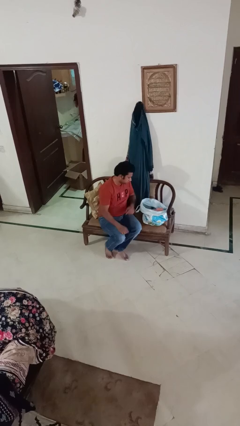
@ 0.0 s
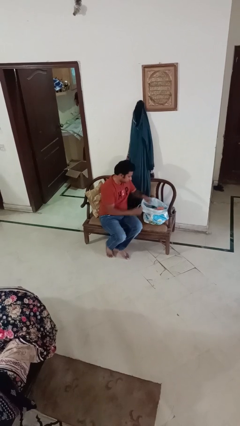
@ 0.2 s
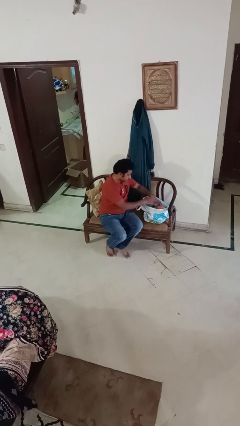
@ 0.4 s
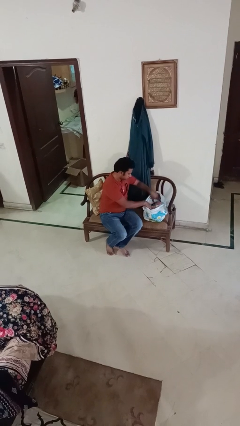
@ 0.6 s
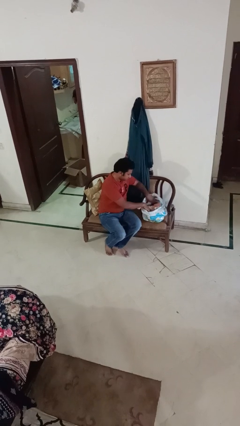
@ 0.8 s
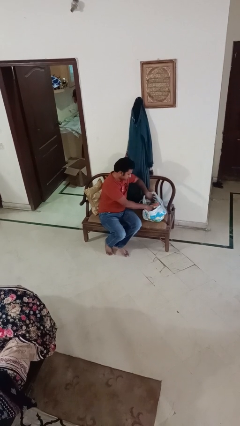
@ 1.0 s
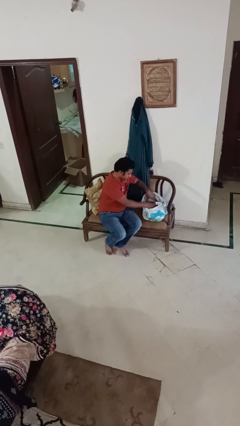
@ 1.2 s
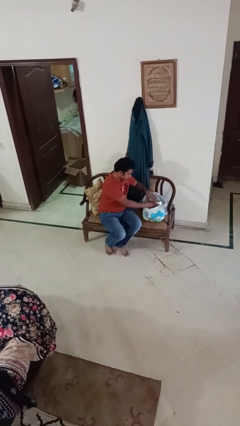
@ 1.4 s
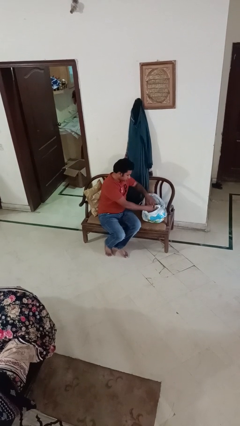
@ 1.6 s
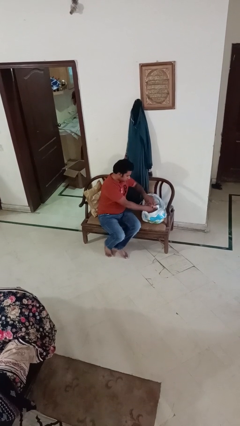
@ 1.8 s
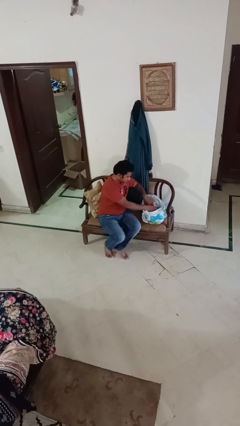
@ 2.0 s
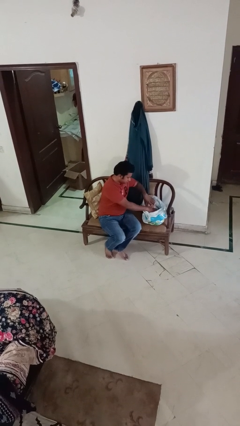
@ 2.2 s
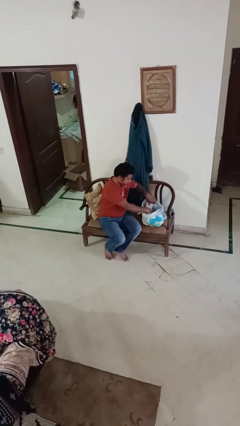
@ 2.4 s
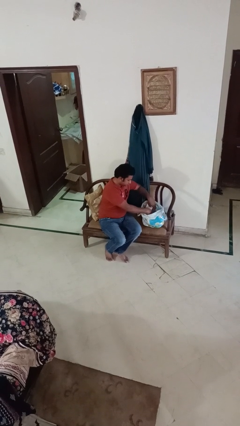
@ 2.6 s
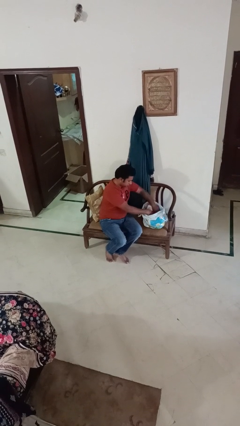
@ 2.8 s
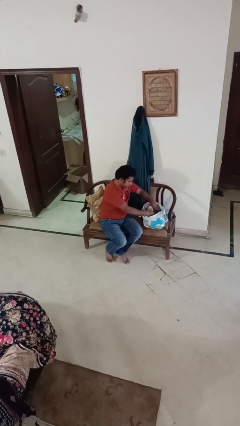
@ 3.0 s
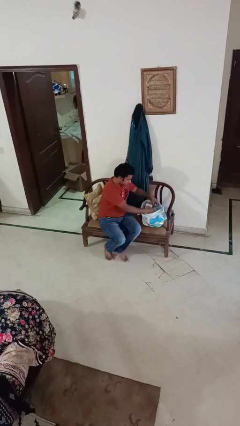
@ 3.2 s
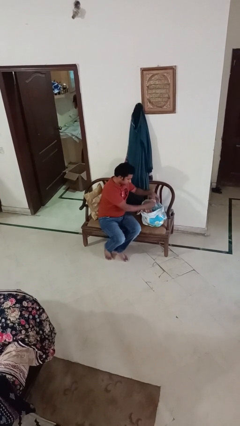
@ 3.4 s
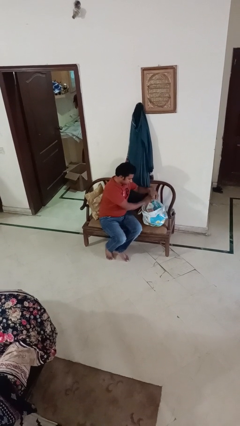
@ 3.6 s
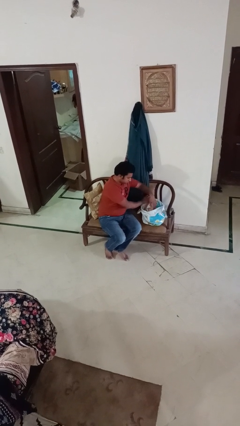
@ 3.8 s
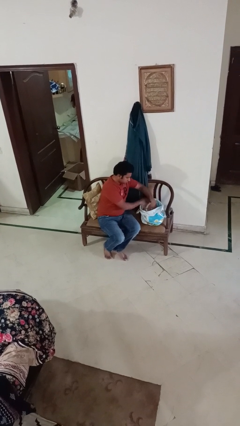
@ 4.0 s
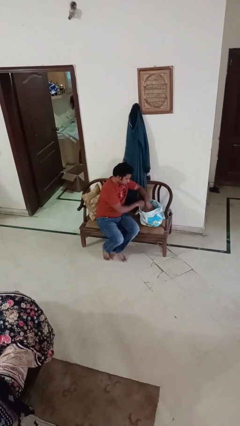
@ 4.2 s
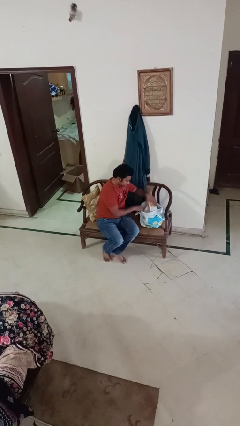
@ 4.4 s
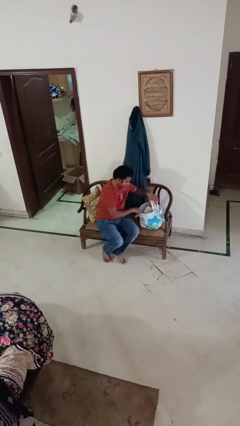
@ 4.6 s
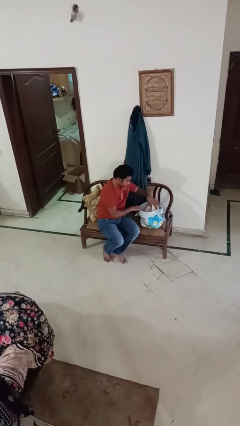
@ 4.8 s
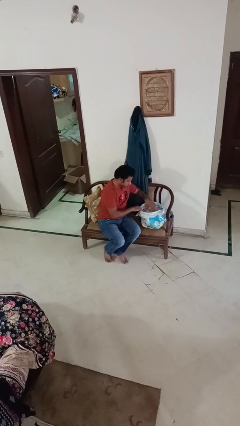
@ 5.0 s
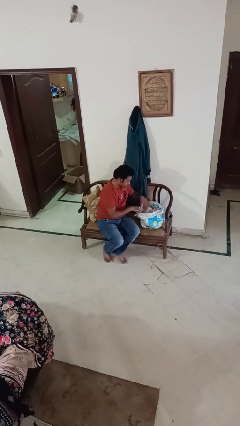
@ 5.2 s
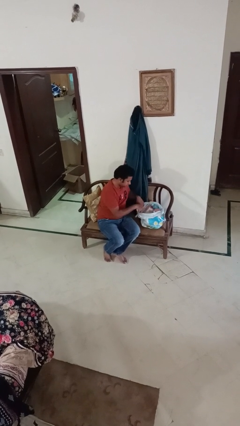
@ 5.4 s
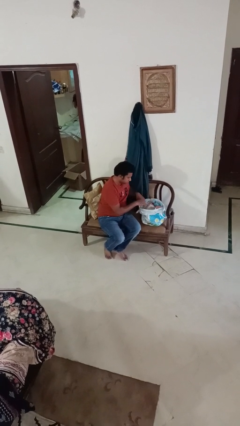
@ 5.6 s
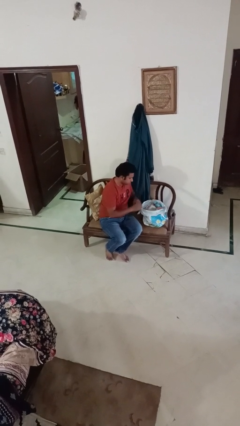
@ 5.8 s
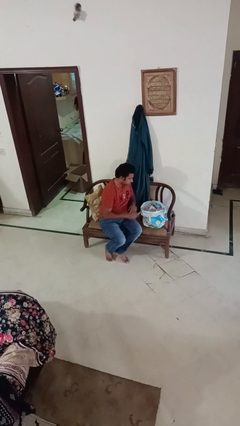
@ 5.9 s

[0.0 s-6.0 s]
person searches in bag

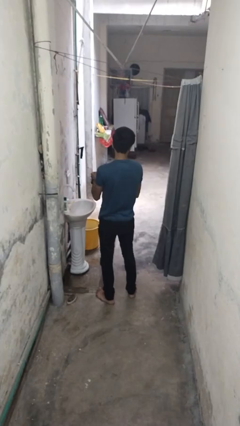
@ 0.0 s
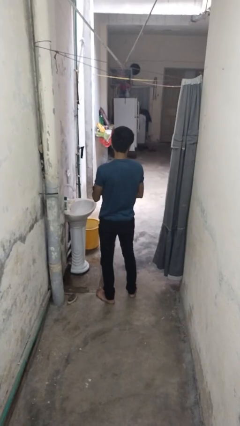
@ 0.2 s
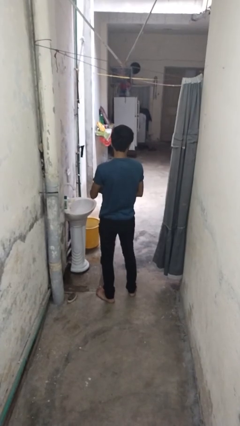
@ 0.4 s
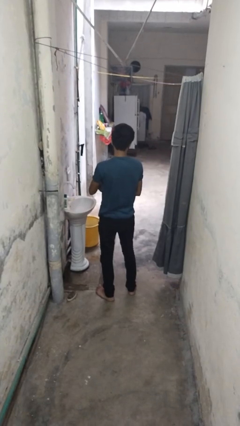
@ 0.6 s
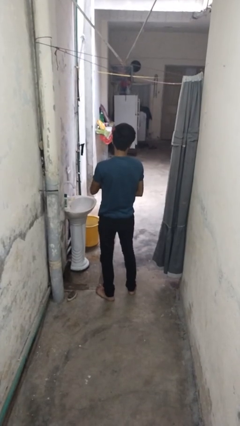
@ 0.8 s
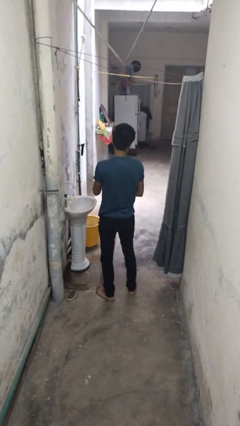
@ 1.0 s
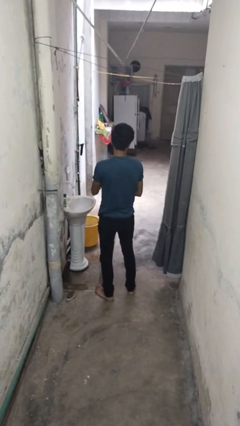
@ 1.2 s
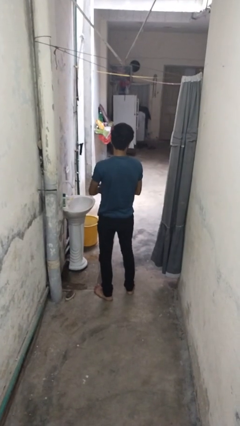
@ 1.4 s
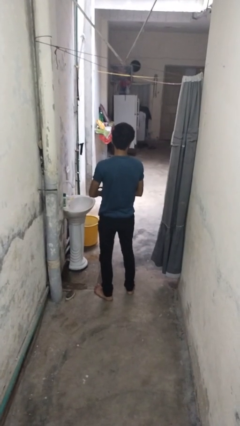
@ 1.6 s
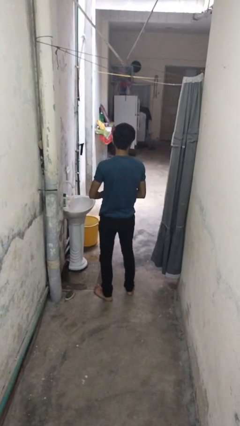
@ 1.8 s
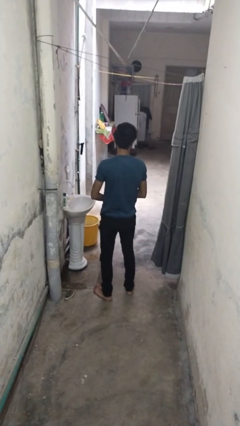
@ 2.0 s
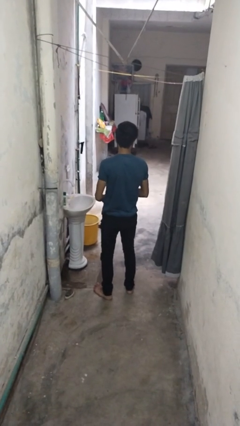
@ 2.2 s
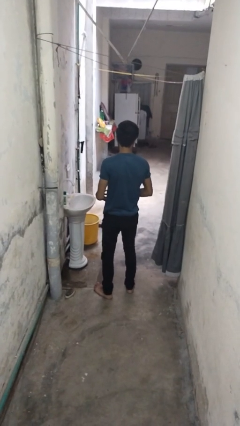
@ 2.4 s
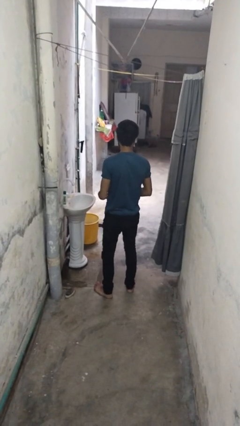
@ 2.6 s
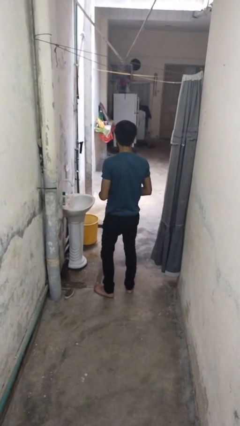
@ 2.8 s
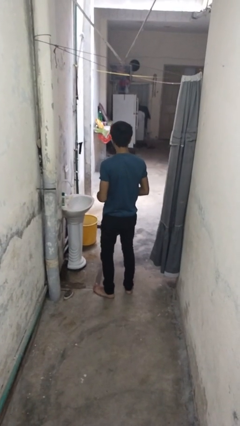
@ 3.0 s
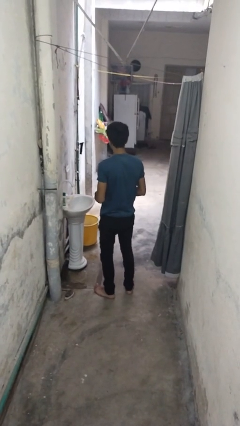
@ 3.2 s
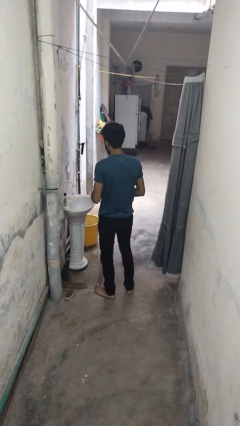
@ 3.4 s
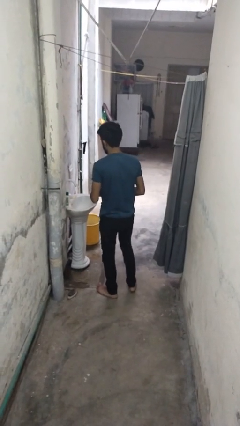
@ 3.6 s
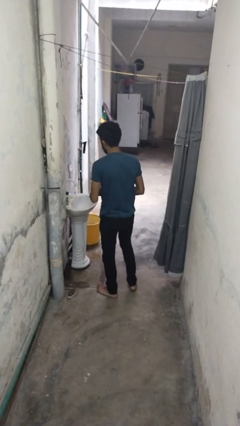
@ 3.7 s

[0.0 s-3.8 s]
person takes off wristwatch

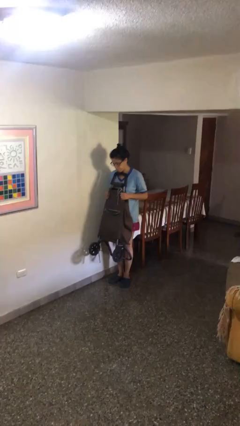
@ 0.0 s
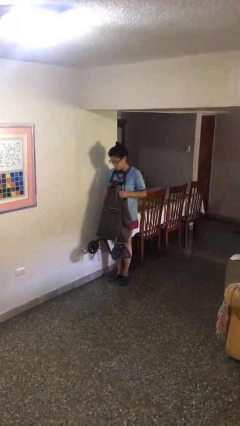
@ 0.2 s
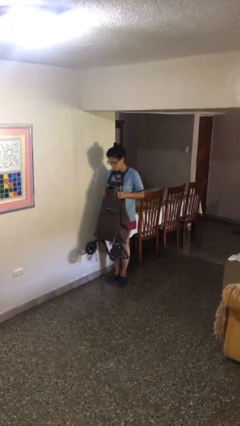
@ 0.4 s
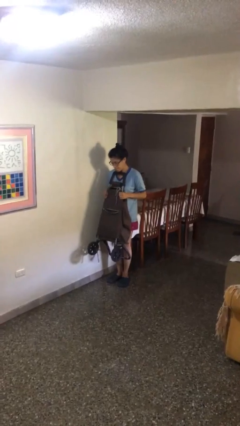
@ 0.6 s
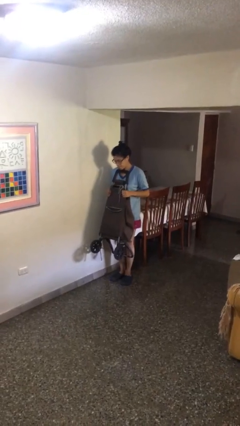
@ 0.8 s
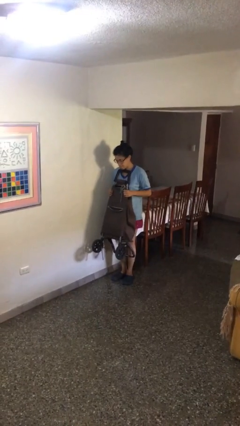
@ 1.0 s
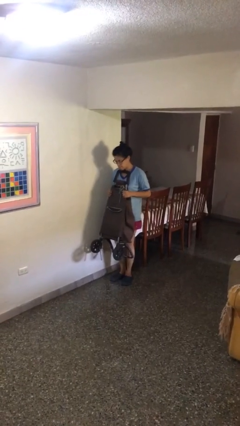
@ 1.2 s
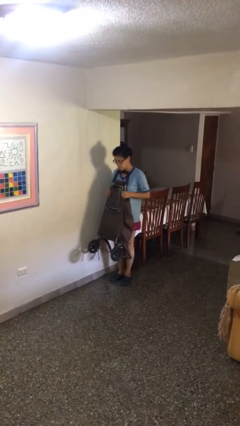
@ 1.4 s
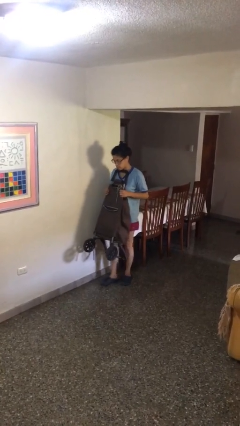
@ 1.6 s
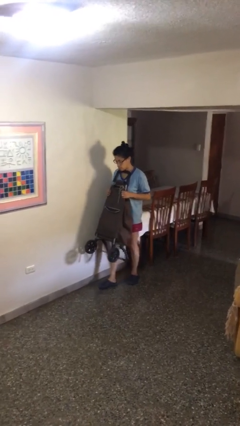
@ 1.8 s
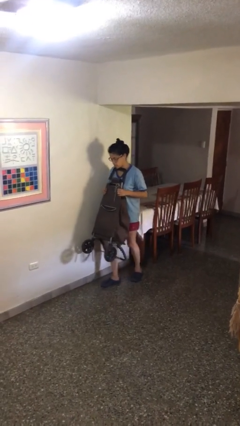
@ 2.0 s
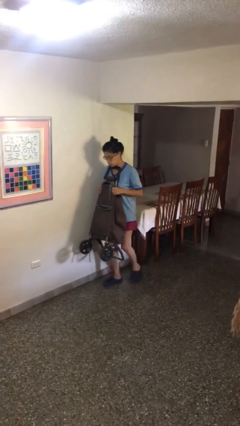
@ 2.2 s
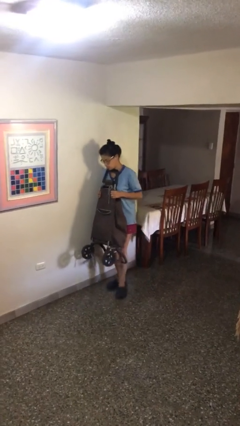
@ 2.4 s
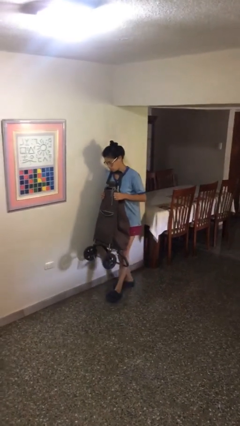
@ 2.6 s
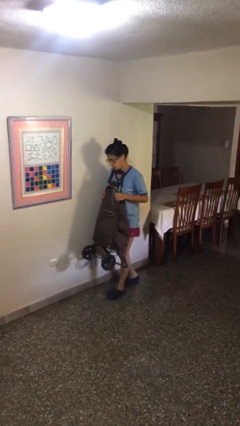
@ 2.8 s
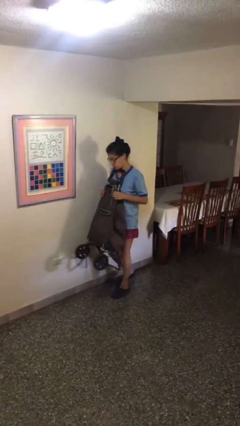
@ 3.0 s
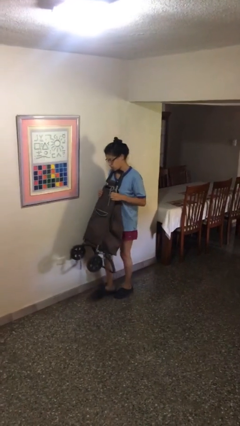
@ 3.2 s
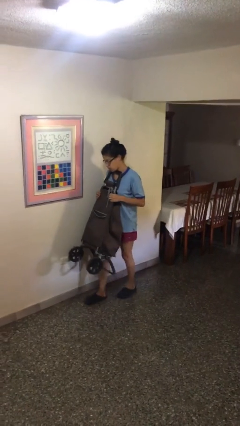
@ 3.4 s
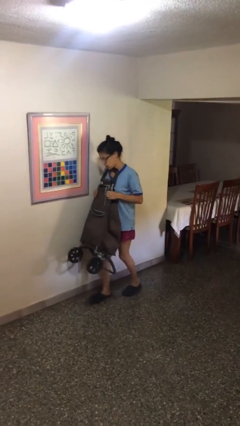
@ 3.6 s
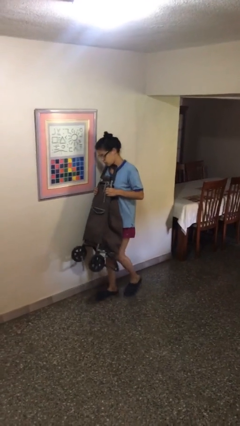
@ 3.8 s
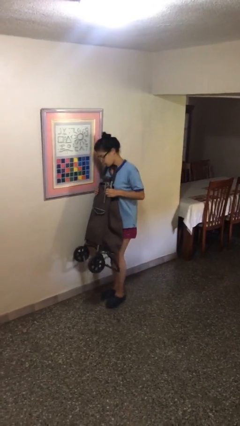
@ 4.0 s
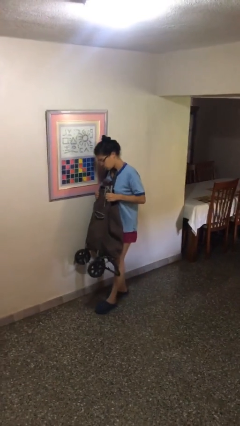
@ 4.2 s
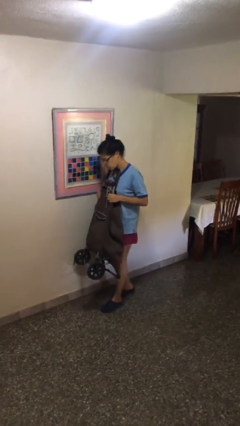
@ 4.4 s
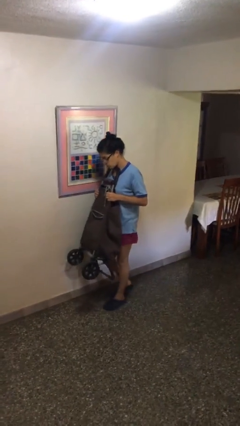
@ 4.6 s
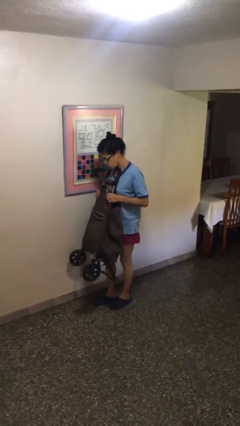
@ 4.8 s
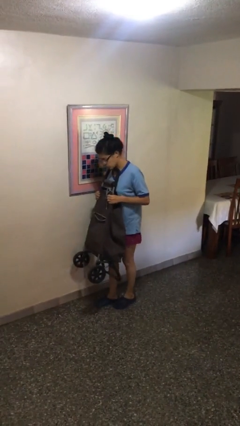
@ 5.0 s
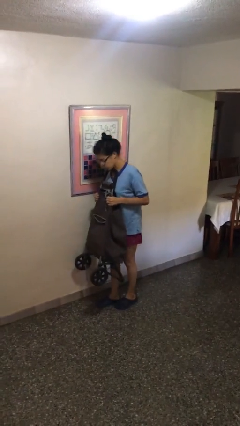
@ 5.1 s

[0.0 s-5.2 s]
person carries heavy object

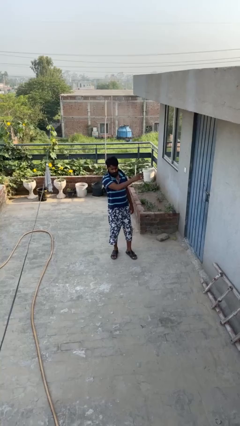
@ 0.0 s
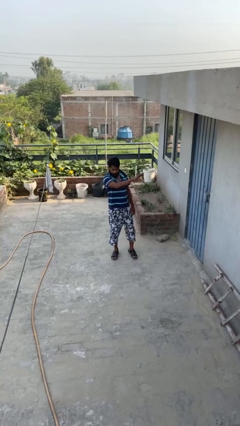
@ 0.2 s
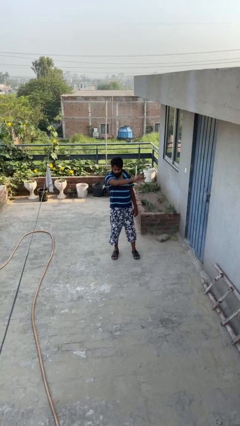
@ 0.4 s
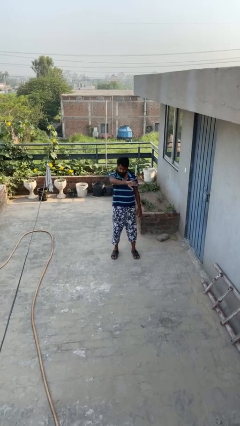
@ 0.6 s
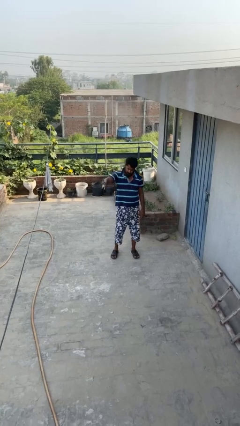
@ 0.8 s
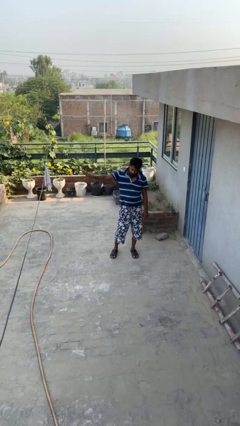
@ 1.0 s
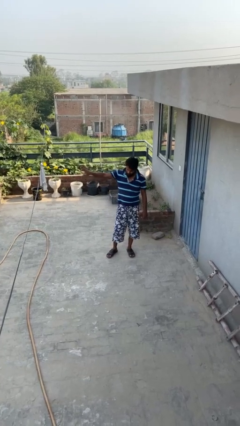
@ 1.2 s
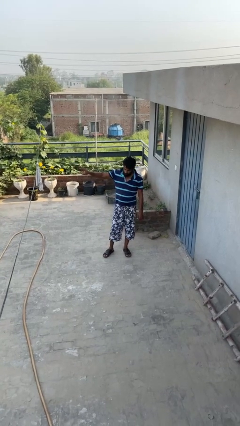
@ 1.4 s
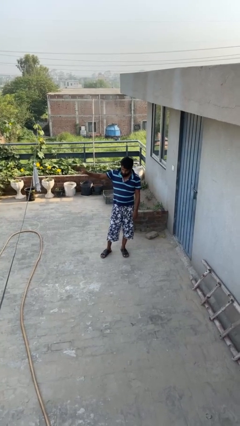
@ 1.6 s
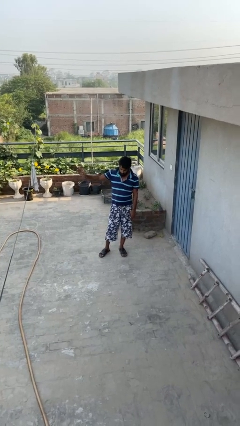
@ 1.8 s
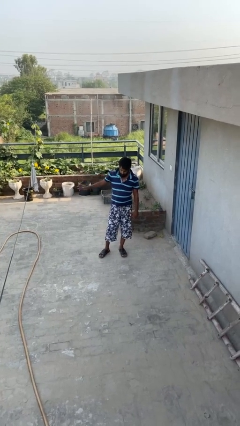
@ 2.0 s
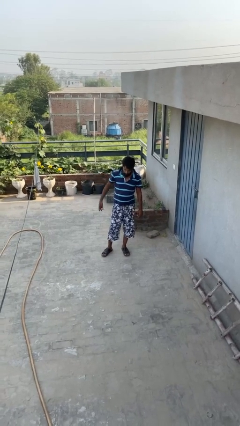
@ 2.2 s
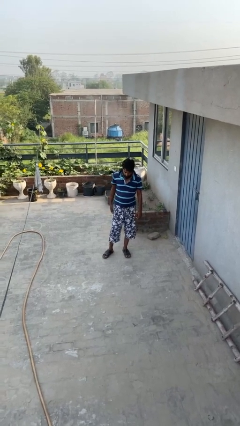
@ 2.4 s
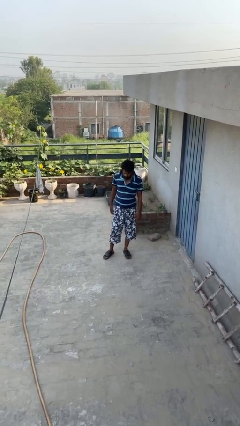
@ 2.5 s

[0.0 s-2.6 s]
person gestures swipe right
